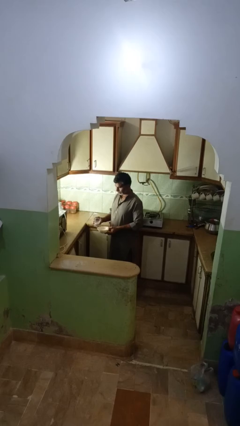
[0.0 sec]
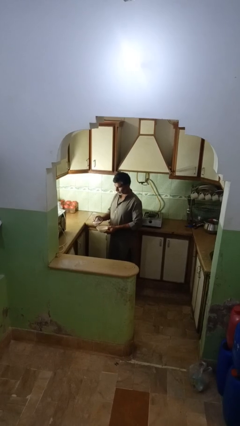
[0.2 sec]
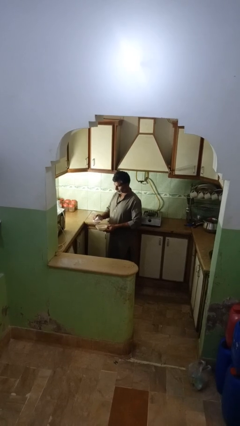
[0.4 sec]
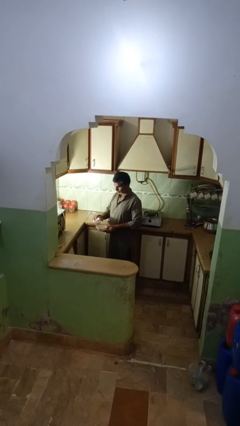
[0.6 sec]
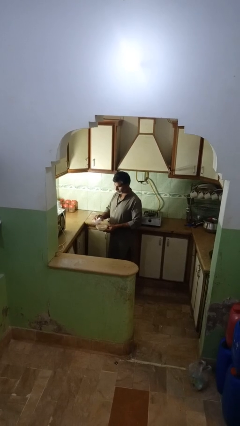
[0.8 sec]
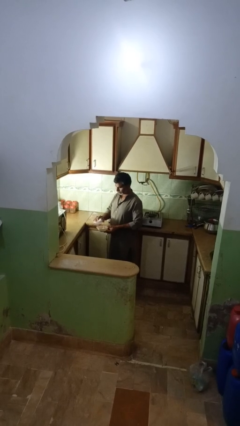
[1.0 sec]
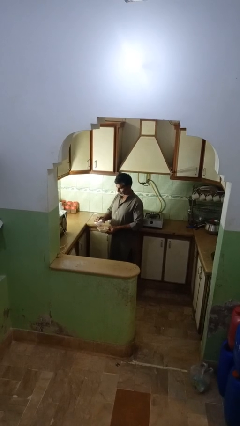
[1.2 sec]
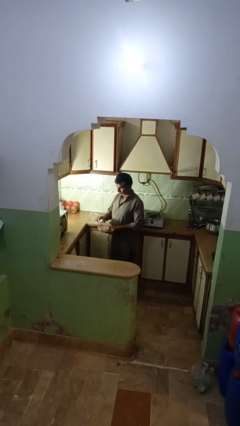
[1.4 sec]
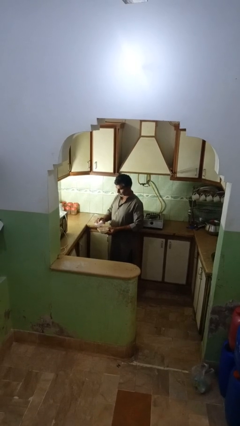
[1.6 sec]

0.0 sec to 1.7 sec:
person pours into bowl

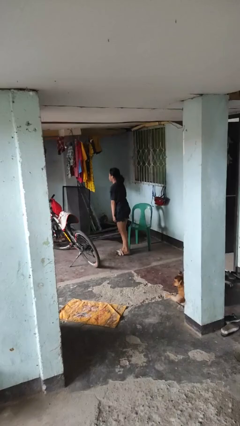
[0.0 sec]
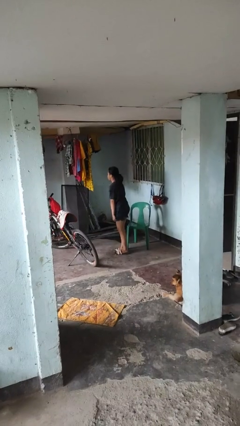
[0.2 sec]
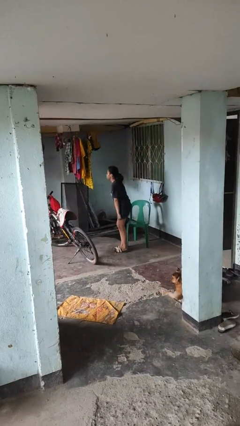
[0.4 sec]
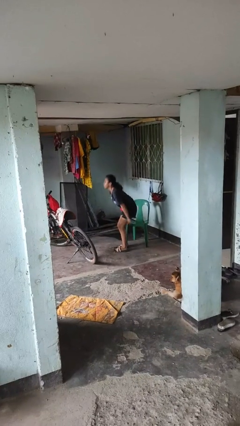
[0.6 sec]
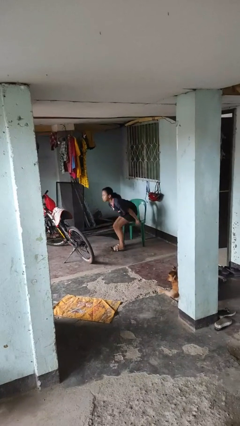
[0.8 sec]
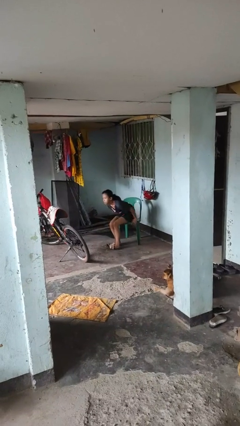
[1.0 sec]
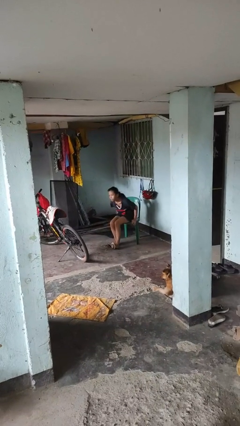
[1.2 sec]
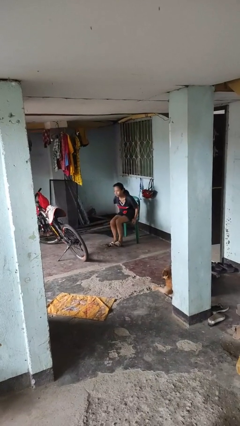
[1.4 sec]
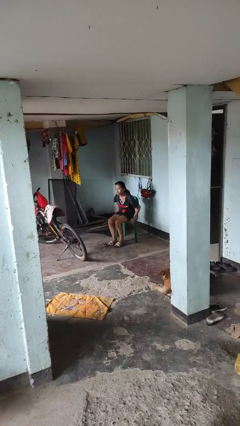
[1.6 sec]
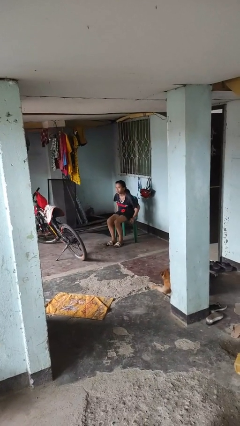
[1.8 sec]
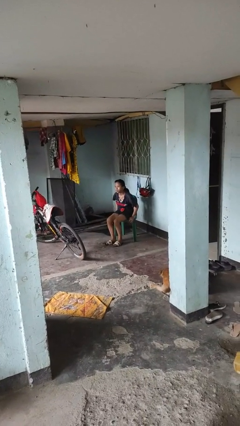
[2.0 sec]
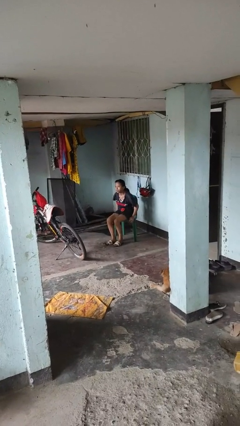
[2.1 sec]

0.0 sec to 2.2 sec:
person sits down

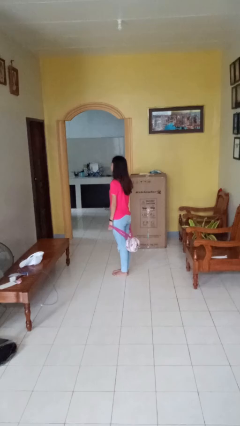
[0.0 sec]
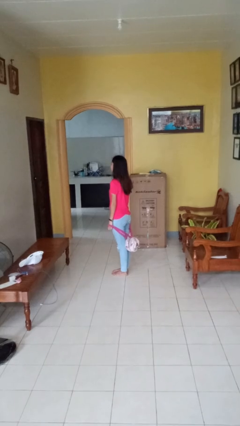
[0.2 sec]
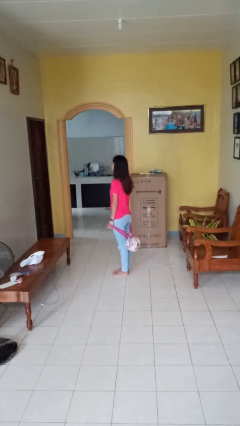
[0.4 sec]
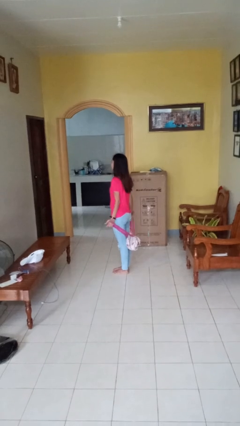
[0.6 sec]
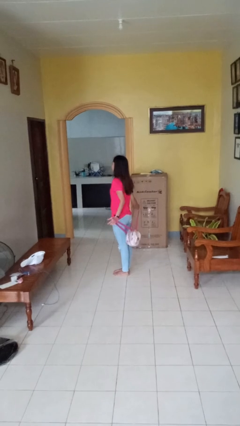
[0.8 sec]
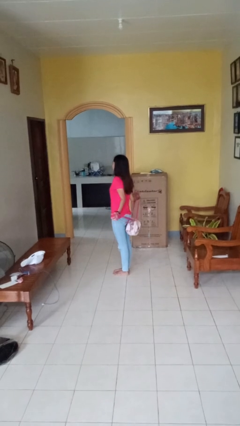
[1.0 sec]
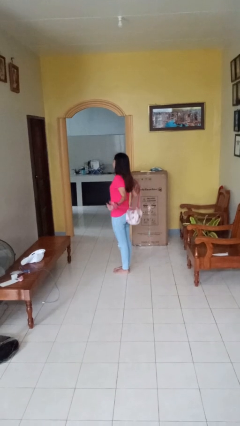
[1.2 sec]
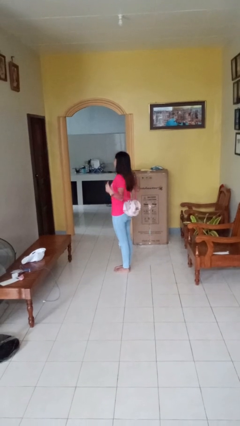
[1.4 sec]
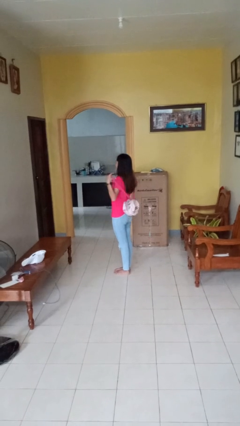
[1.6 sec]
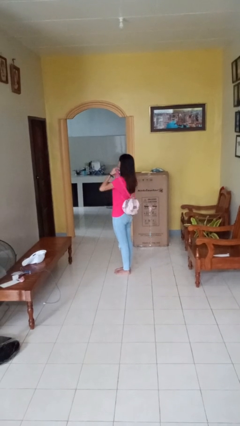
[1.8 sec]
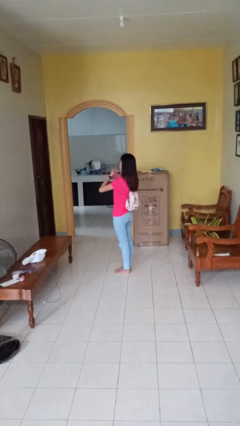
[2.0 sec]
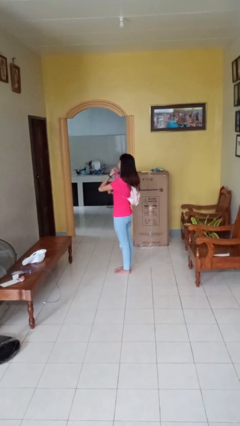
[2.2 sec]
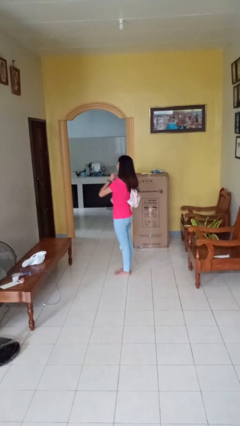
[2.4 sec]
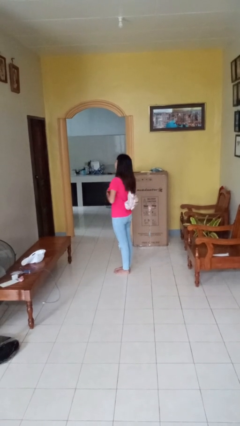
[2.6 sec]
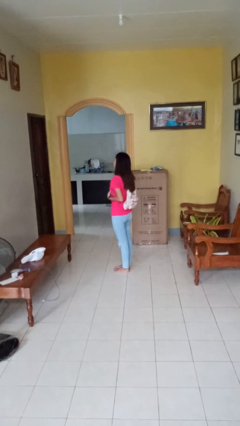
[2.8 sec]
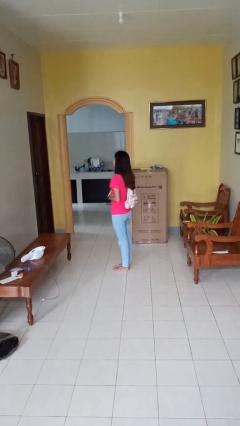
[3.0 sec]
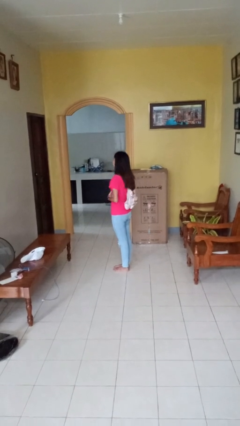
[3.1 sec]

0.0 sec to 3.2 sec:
person puts on backpack

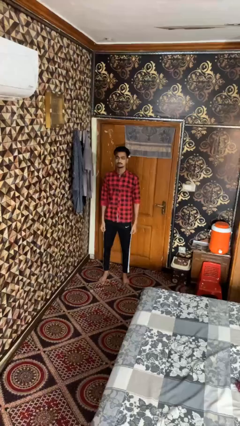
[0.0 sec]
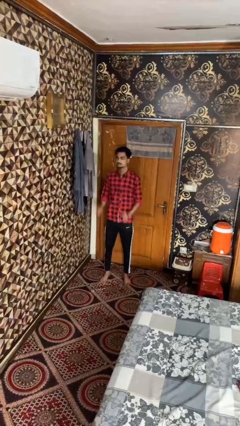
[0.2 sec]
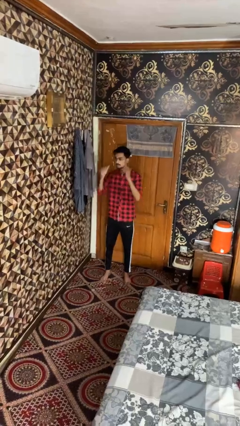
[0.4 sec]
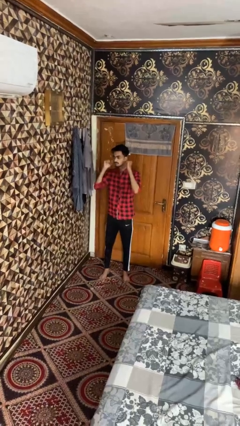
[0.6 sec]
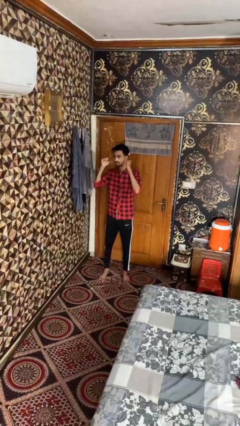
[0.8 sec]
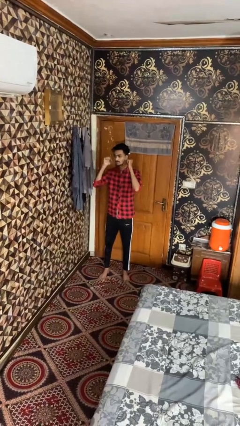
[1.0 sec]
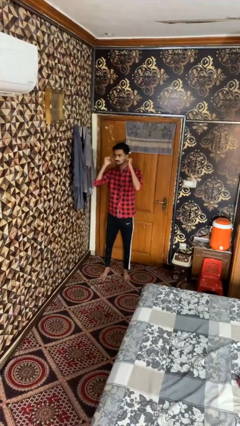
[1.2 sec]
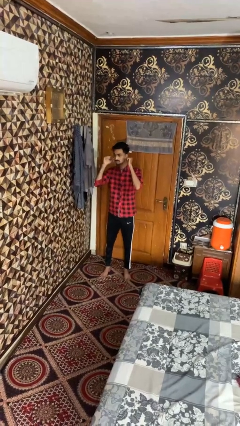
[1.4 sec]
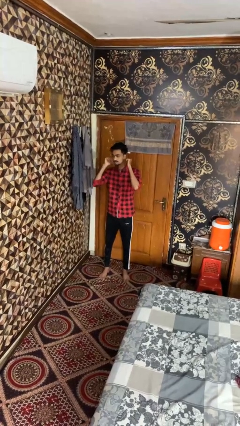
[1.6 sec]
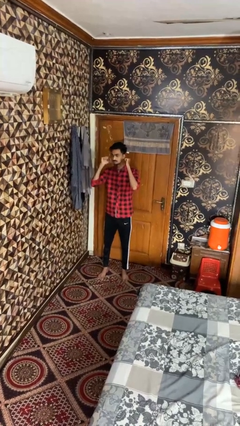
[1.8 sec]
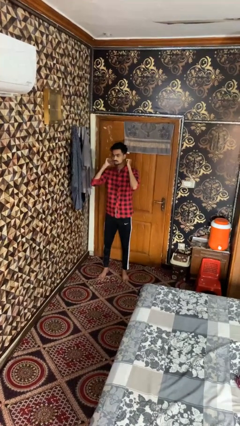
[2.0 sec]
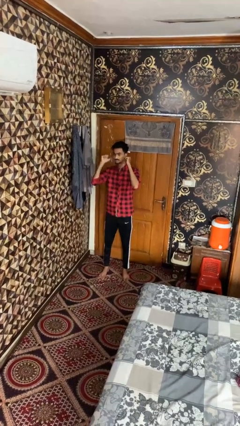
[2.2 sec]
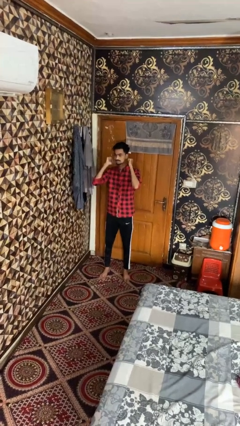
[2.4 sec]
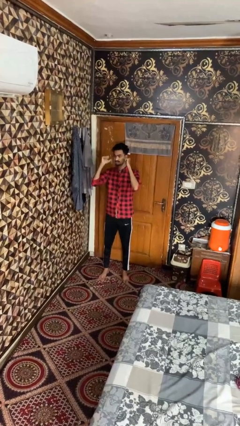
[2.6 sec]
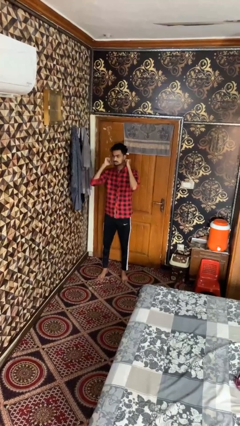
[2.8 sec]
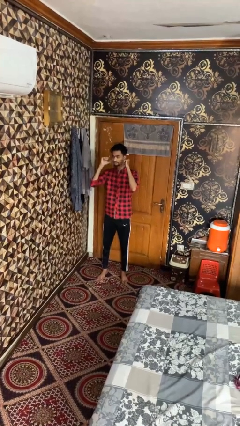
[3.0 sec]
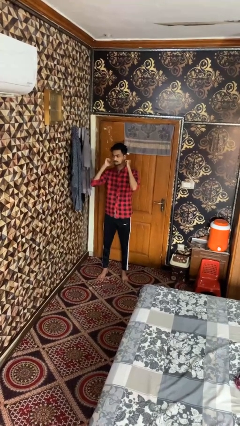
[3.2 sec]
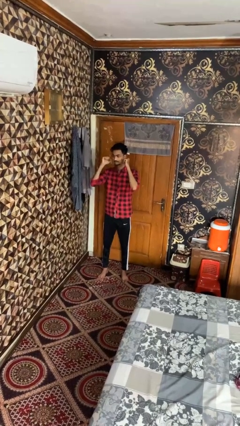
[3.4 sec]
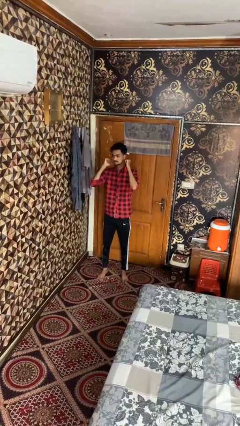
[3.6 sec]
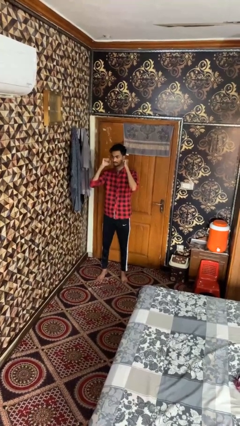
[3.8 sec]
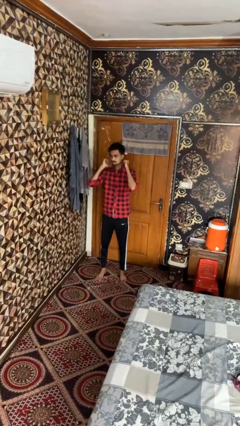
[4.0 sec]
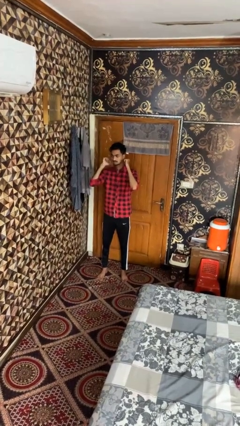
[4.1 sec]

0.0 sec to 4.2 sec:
person gestures behind me

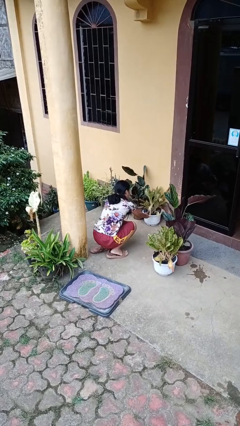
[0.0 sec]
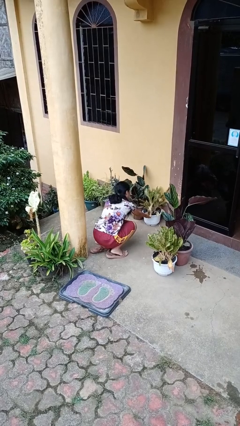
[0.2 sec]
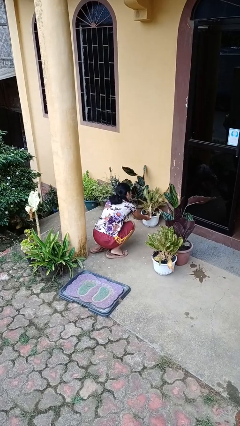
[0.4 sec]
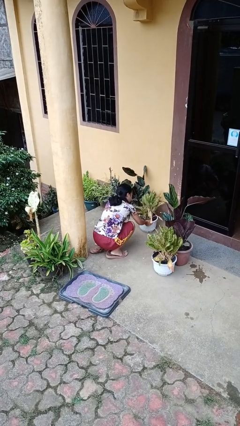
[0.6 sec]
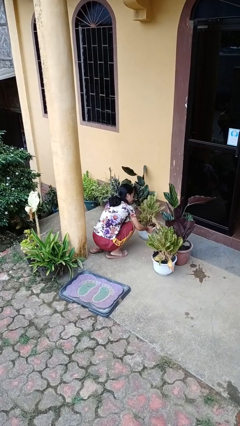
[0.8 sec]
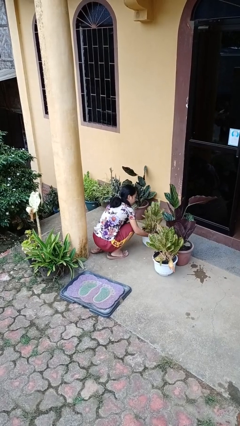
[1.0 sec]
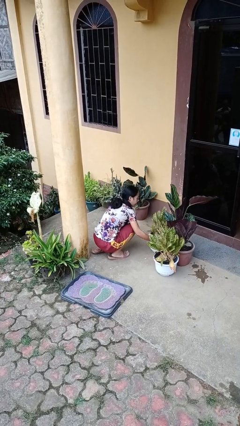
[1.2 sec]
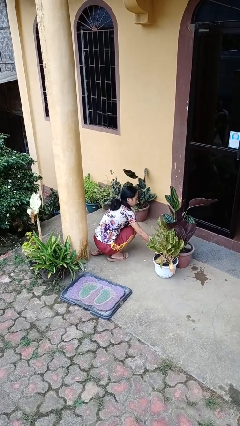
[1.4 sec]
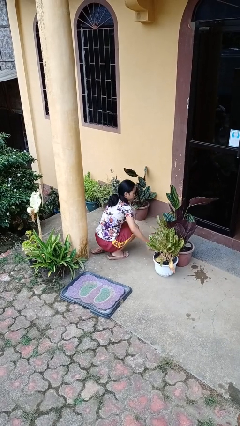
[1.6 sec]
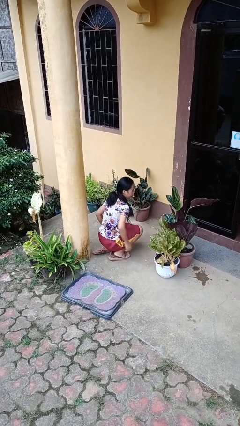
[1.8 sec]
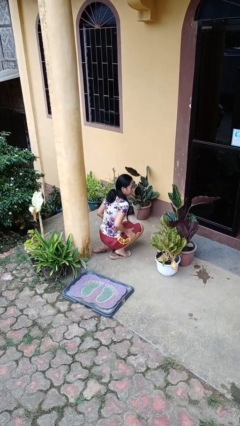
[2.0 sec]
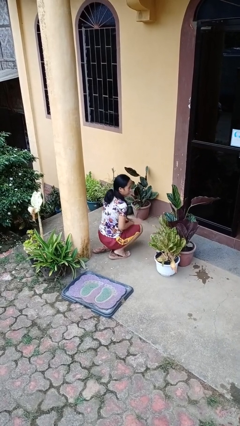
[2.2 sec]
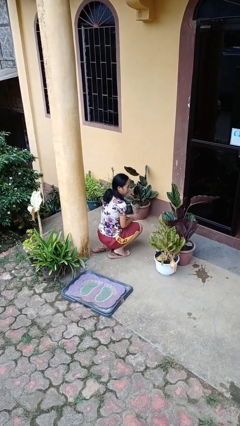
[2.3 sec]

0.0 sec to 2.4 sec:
person arranges flowers in vase

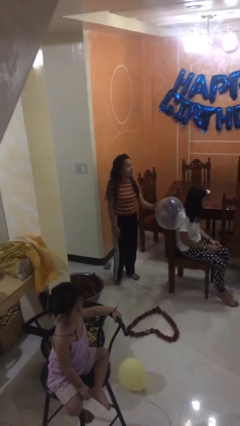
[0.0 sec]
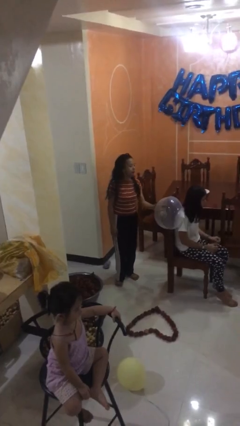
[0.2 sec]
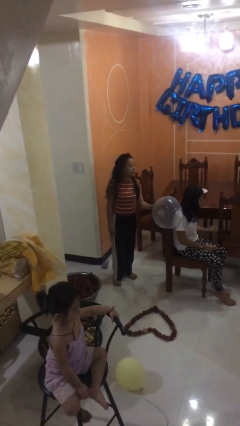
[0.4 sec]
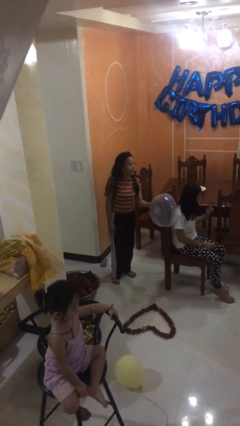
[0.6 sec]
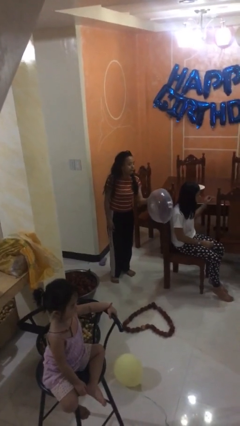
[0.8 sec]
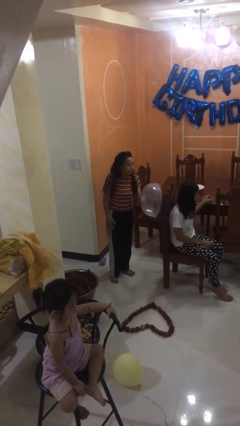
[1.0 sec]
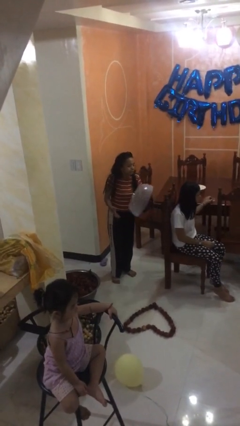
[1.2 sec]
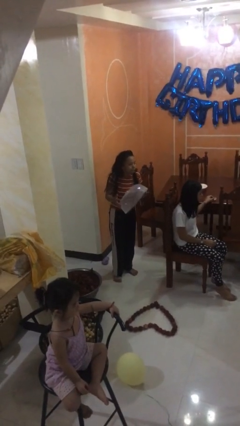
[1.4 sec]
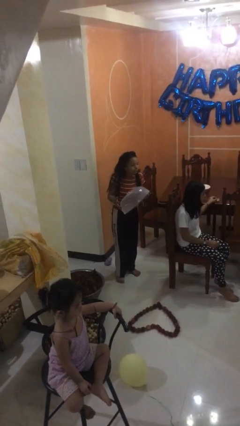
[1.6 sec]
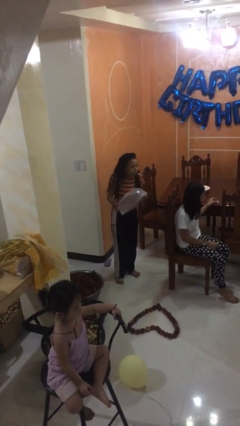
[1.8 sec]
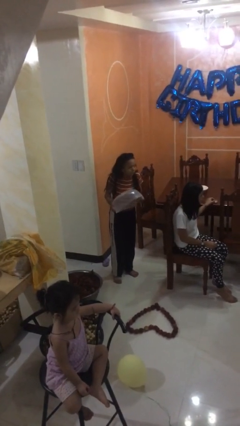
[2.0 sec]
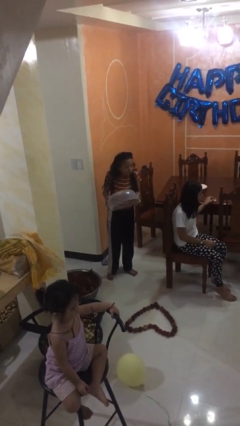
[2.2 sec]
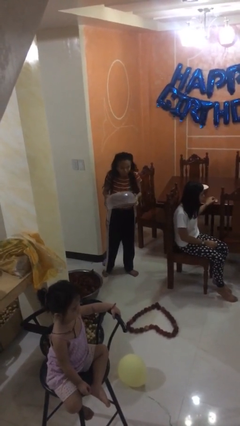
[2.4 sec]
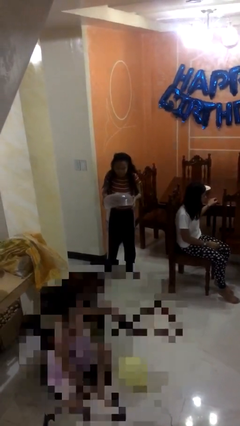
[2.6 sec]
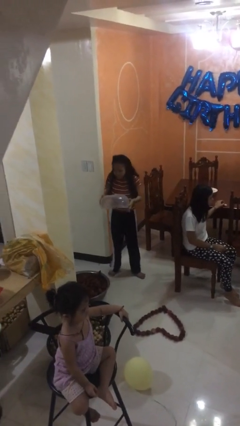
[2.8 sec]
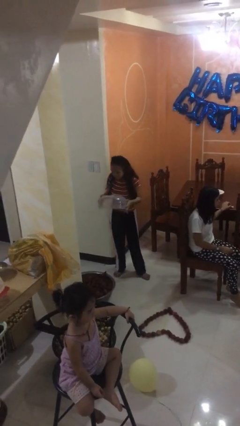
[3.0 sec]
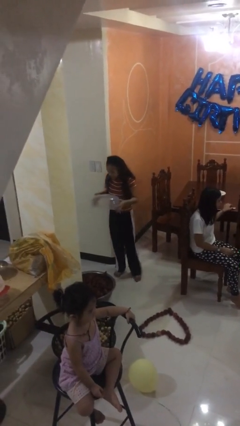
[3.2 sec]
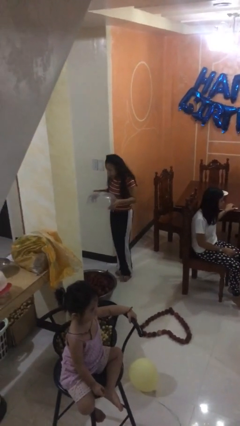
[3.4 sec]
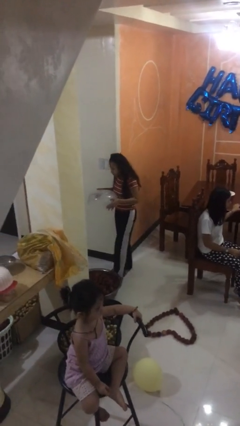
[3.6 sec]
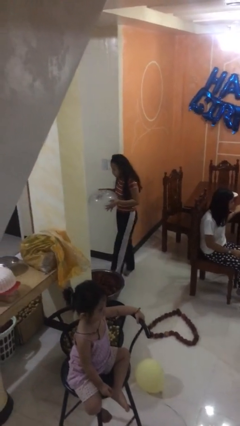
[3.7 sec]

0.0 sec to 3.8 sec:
person steals object from person

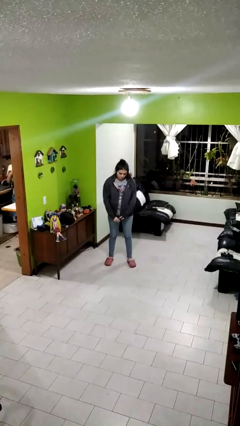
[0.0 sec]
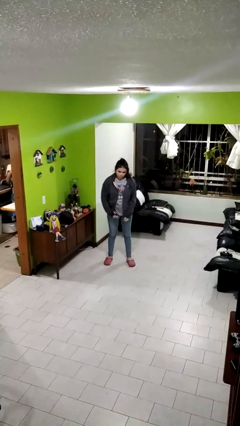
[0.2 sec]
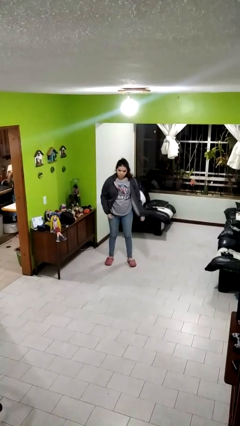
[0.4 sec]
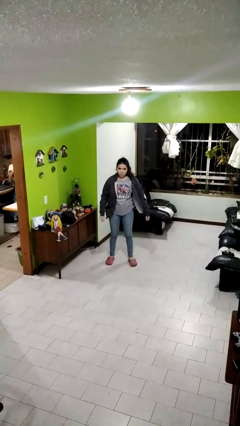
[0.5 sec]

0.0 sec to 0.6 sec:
person unzips jacket
